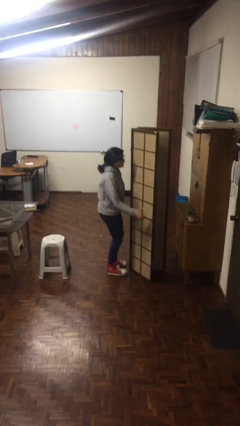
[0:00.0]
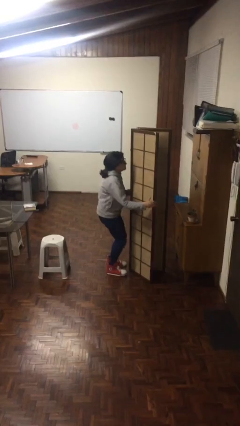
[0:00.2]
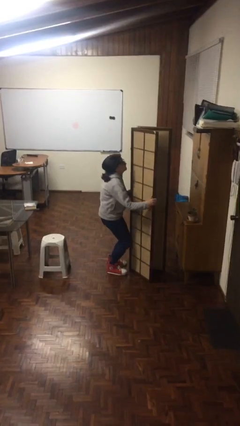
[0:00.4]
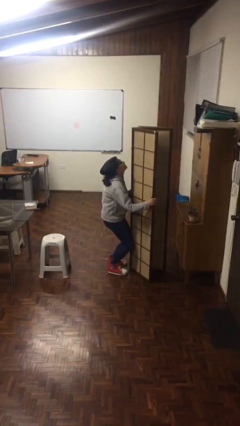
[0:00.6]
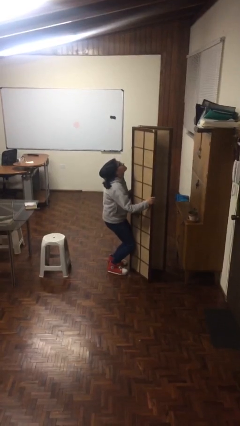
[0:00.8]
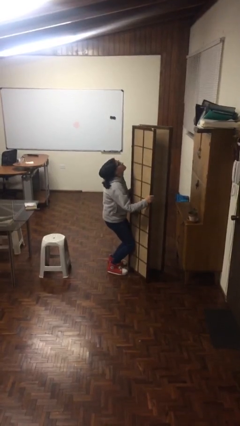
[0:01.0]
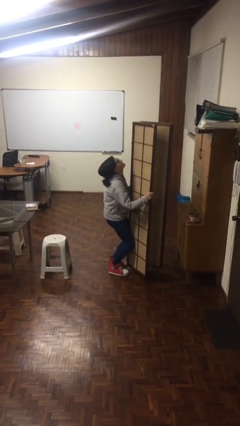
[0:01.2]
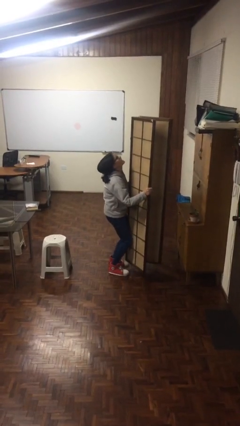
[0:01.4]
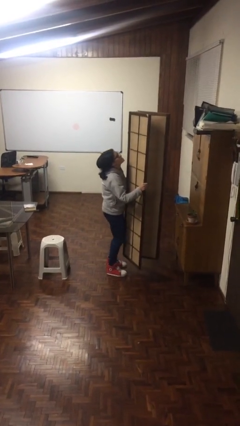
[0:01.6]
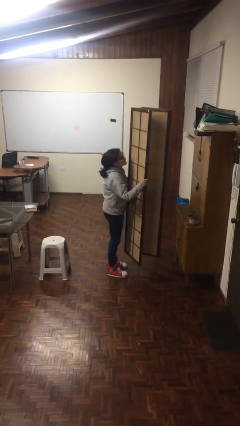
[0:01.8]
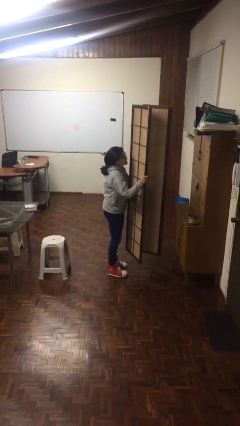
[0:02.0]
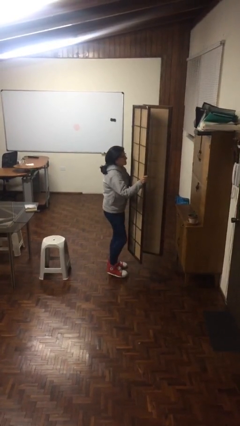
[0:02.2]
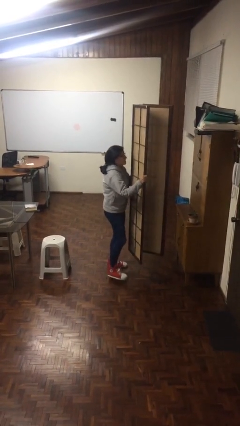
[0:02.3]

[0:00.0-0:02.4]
person picks up object from floor

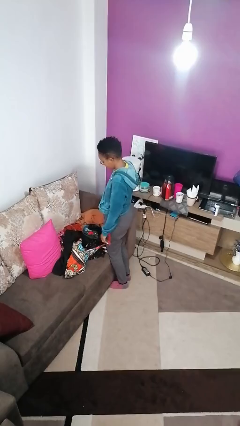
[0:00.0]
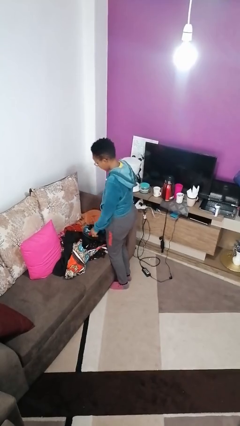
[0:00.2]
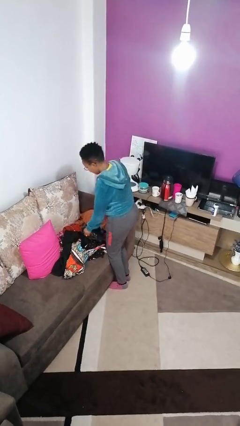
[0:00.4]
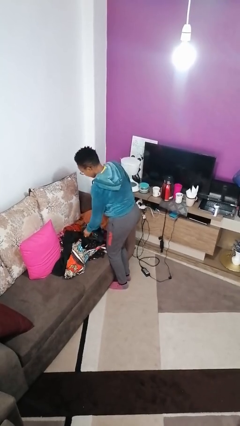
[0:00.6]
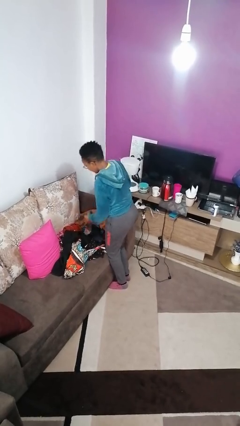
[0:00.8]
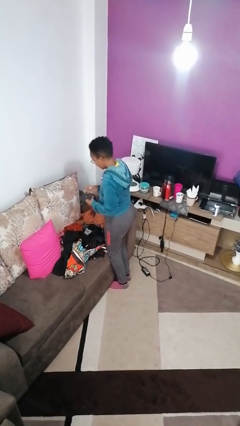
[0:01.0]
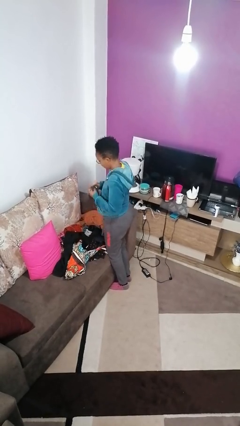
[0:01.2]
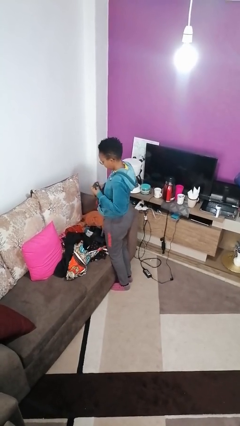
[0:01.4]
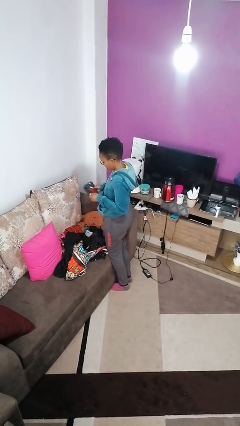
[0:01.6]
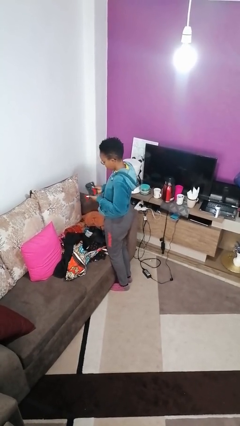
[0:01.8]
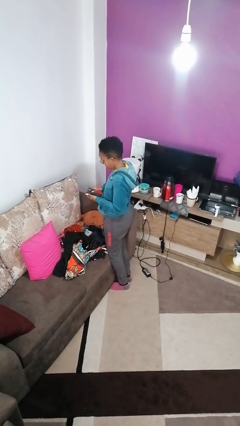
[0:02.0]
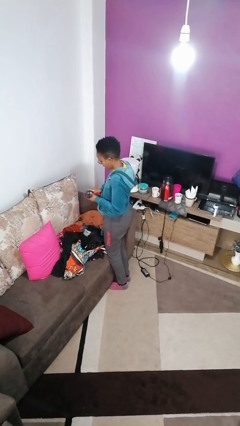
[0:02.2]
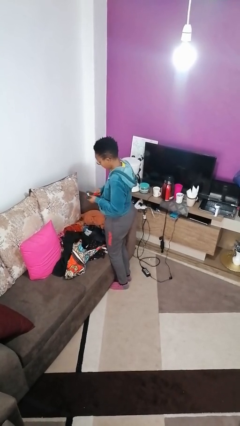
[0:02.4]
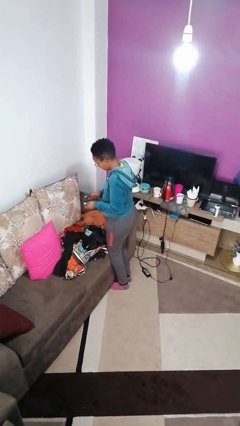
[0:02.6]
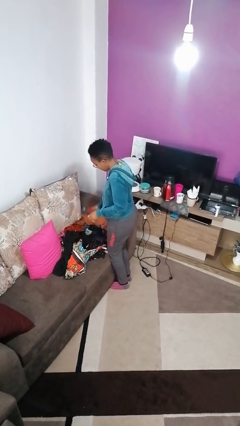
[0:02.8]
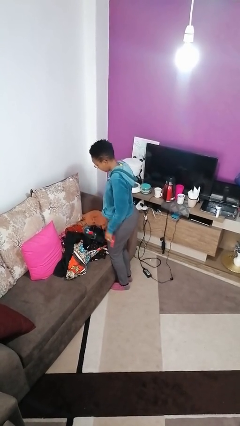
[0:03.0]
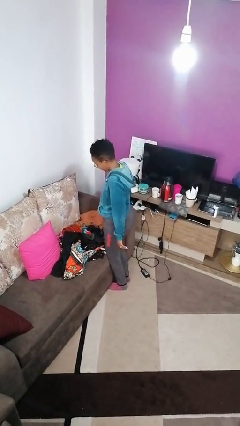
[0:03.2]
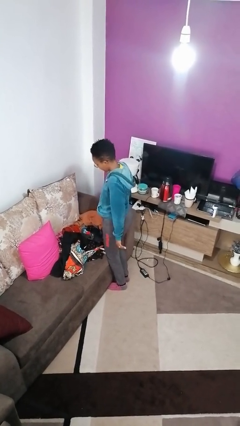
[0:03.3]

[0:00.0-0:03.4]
person folds socks

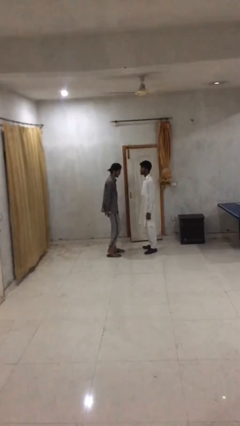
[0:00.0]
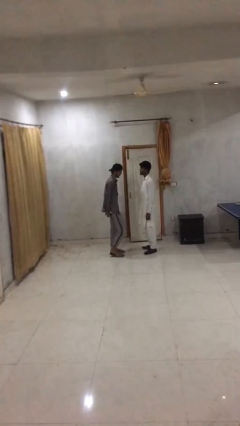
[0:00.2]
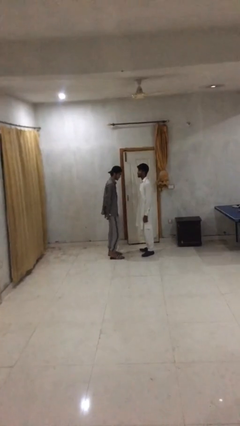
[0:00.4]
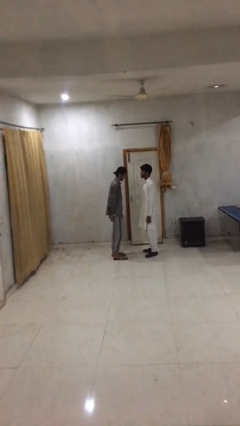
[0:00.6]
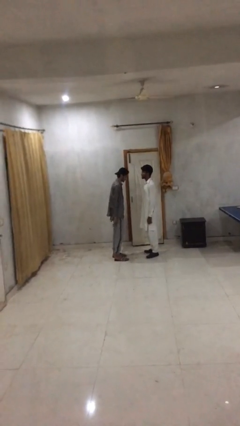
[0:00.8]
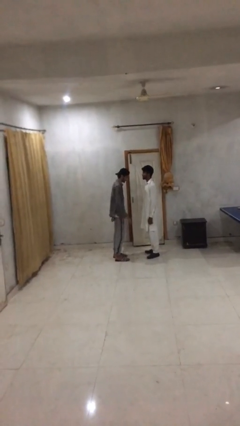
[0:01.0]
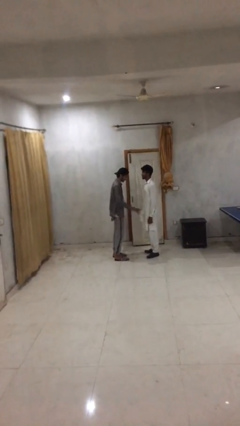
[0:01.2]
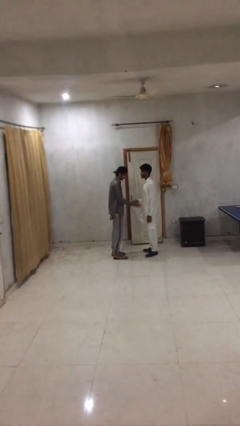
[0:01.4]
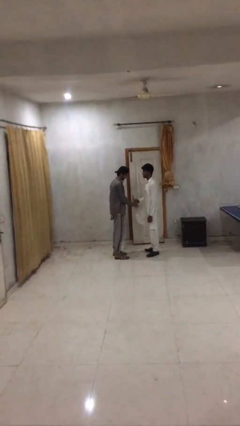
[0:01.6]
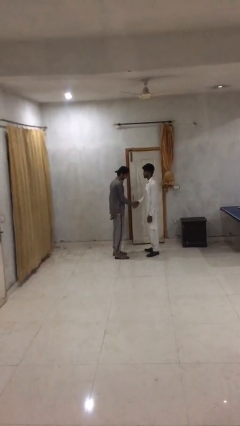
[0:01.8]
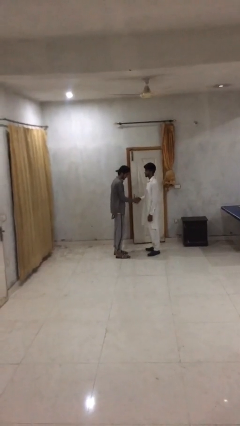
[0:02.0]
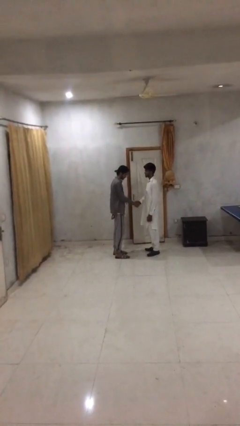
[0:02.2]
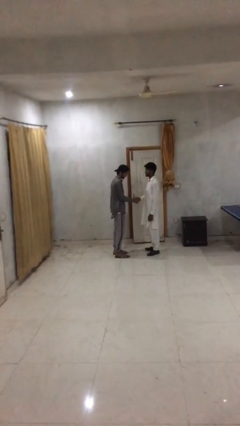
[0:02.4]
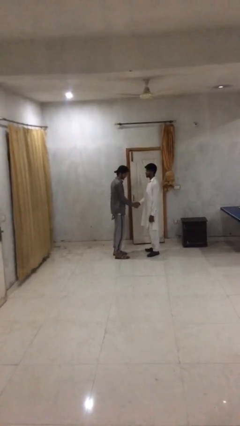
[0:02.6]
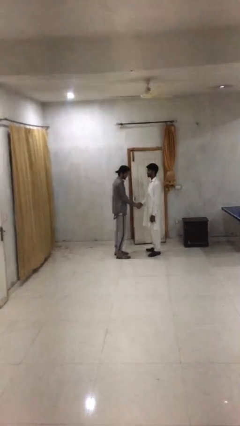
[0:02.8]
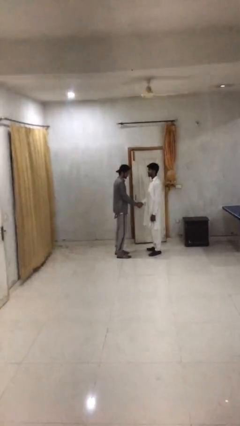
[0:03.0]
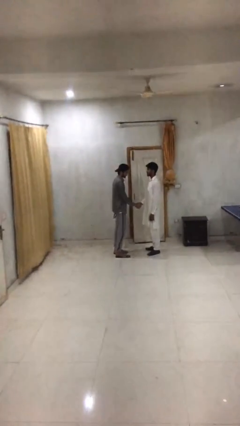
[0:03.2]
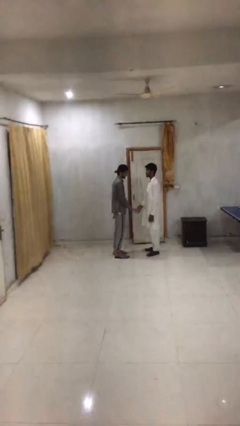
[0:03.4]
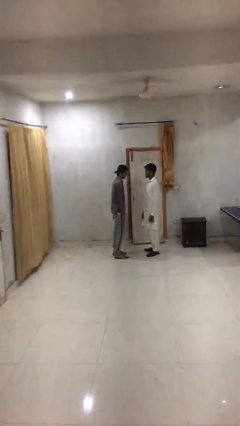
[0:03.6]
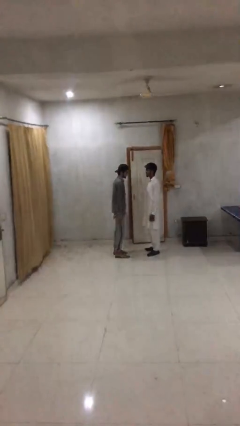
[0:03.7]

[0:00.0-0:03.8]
person shakes hand

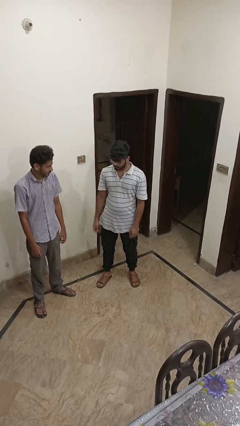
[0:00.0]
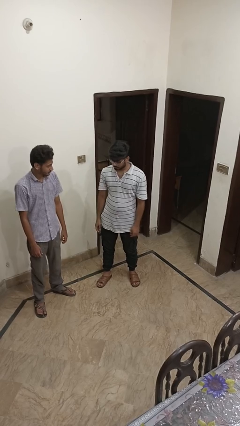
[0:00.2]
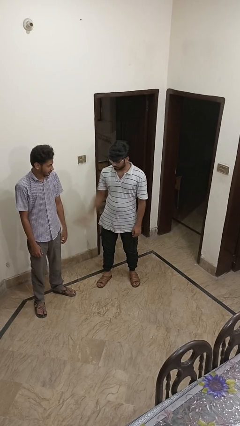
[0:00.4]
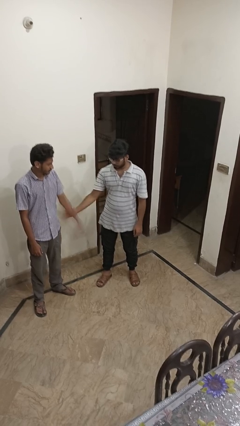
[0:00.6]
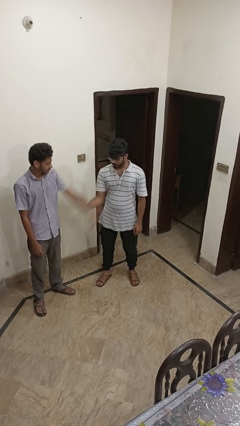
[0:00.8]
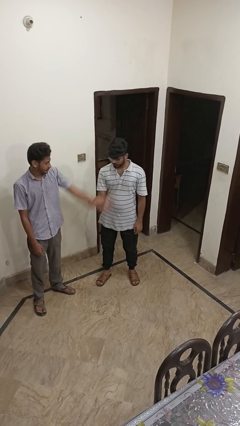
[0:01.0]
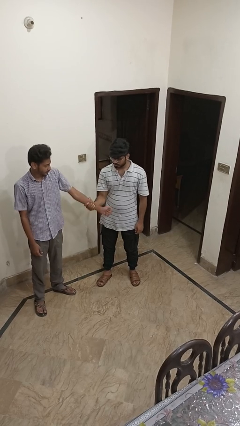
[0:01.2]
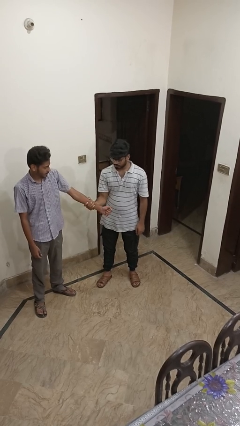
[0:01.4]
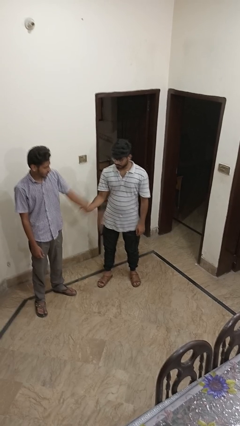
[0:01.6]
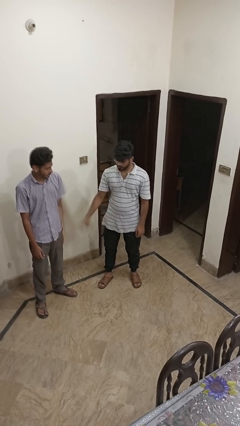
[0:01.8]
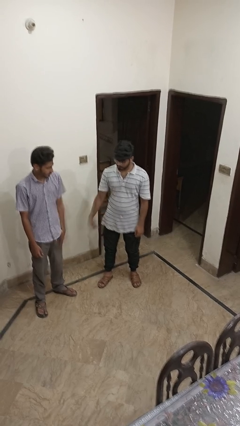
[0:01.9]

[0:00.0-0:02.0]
person grabs person by forearm

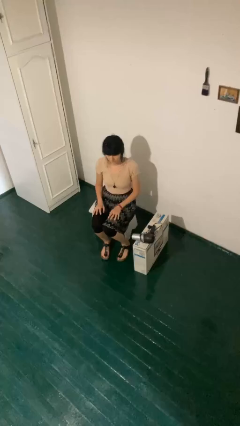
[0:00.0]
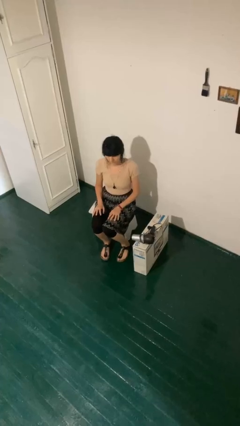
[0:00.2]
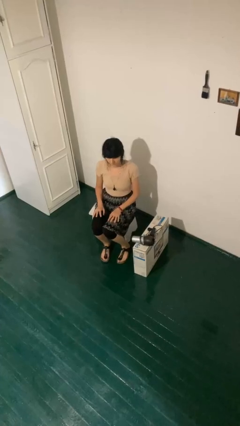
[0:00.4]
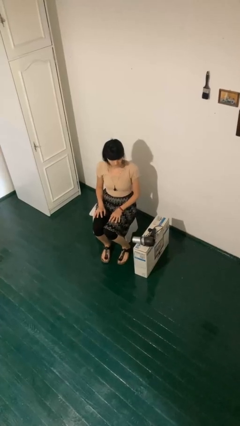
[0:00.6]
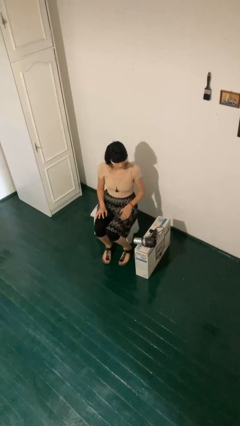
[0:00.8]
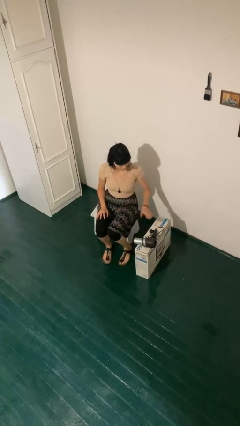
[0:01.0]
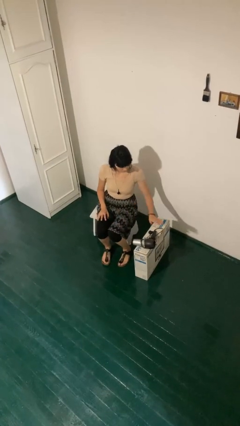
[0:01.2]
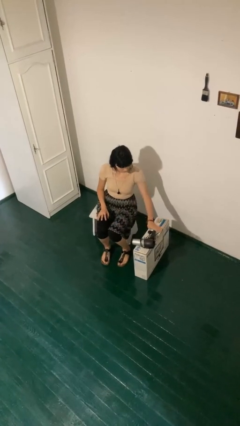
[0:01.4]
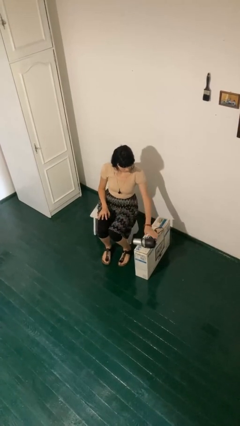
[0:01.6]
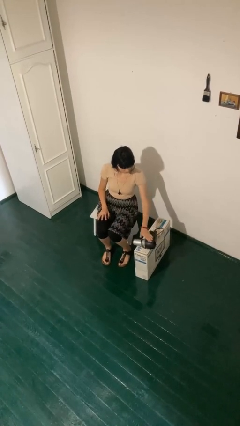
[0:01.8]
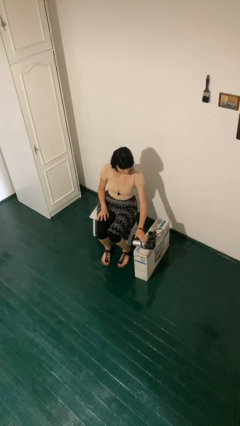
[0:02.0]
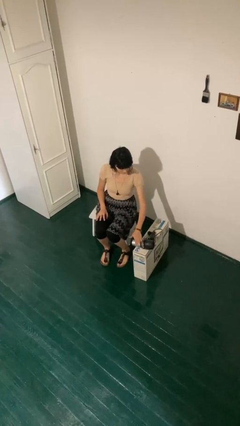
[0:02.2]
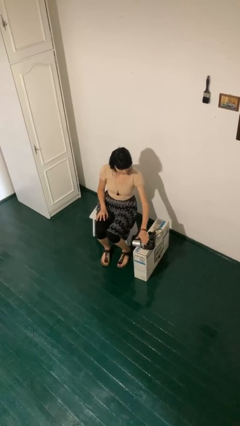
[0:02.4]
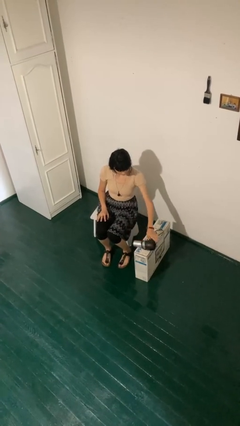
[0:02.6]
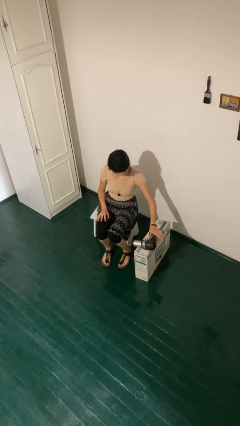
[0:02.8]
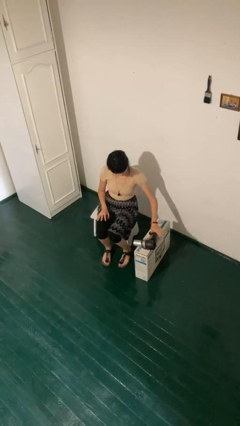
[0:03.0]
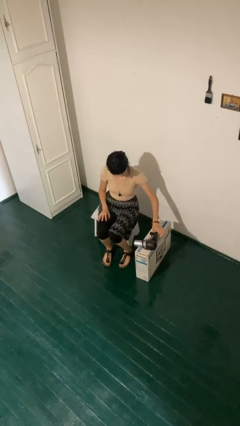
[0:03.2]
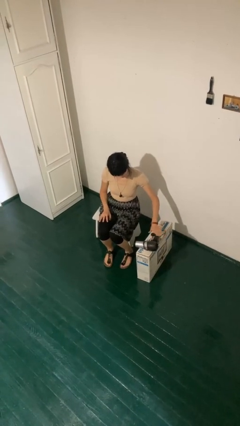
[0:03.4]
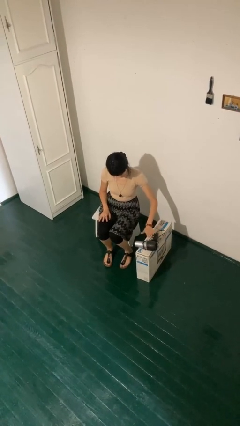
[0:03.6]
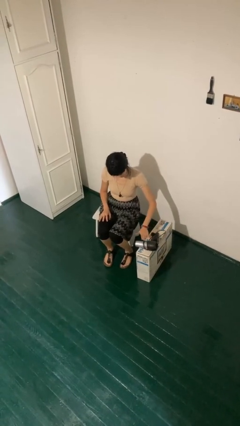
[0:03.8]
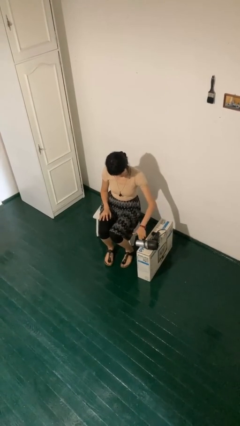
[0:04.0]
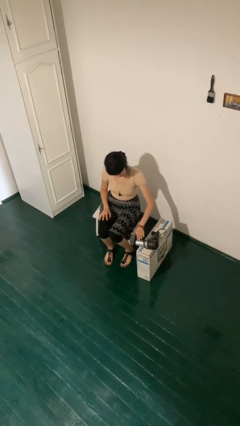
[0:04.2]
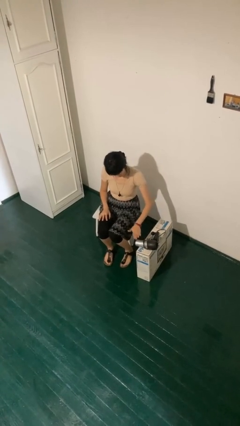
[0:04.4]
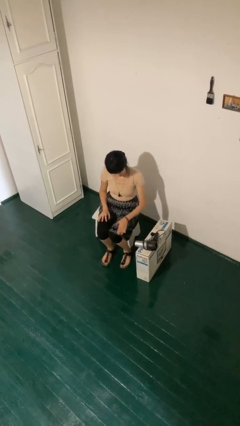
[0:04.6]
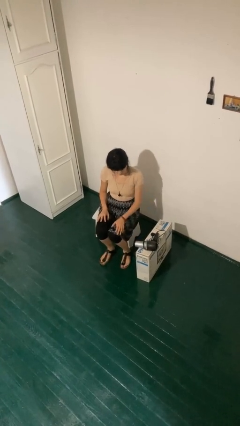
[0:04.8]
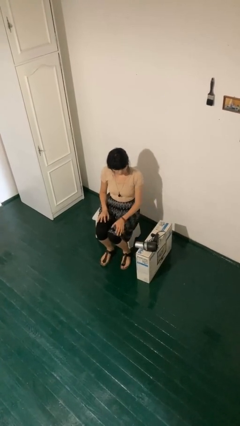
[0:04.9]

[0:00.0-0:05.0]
person waves hand over object

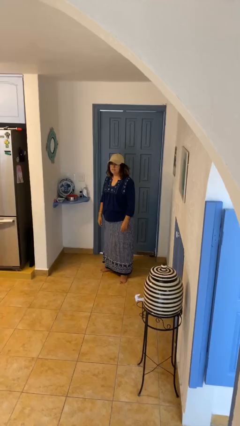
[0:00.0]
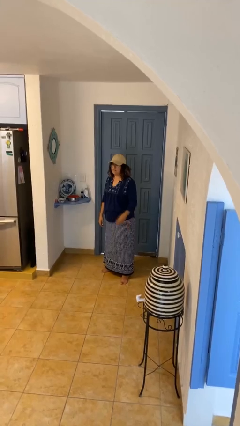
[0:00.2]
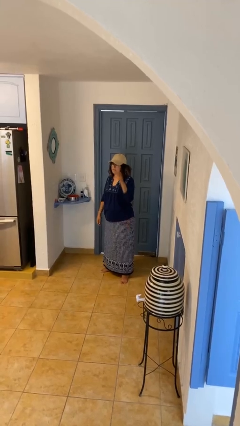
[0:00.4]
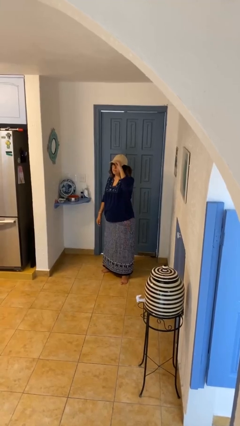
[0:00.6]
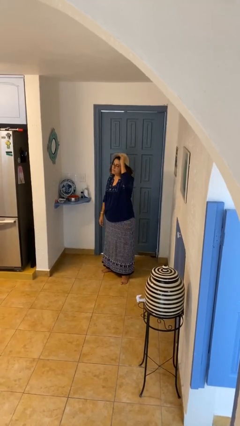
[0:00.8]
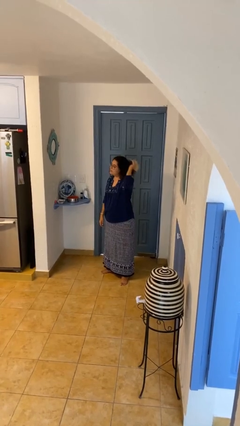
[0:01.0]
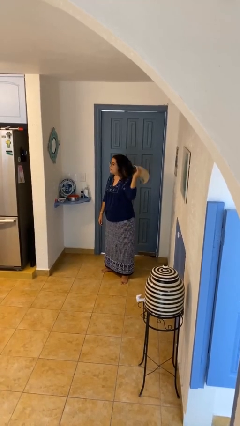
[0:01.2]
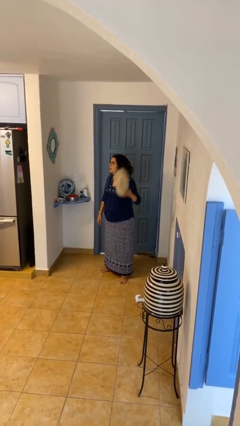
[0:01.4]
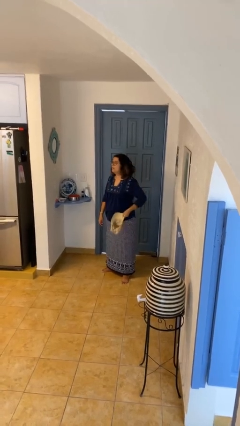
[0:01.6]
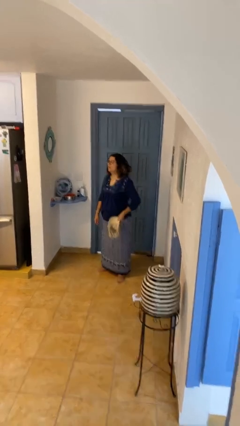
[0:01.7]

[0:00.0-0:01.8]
person takes off hat
